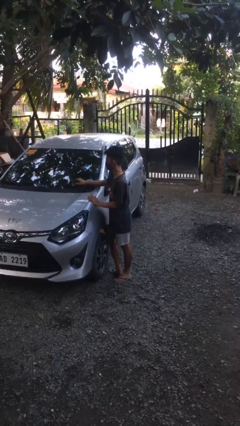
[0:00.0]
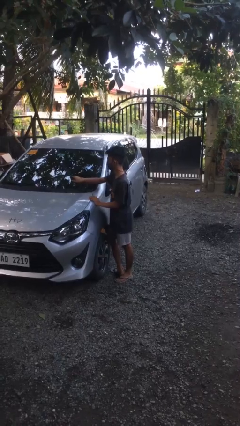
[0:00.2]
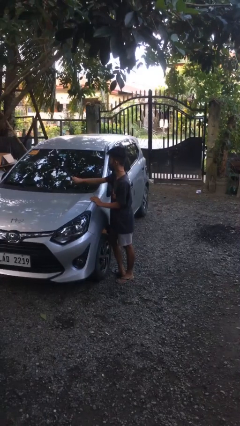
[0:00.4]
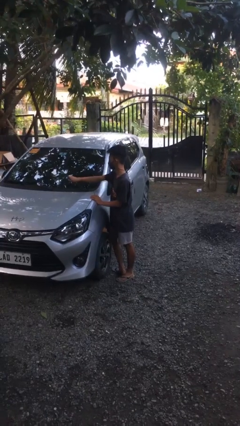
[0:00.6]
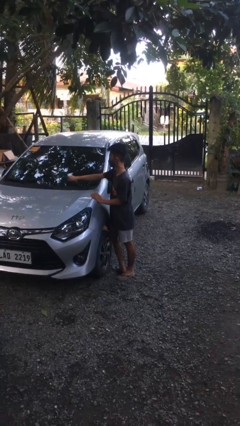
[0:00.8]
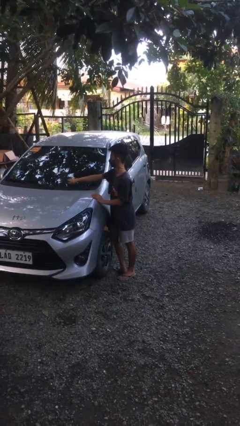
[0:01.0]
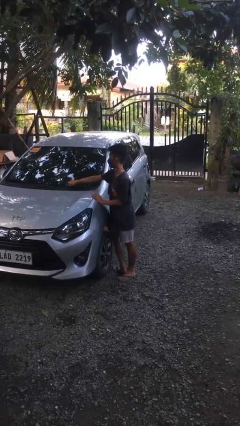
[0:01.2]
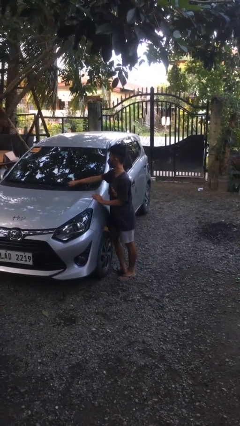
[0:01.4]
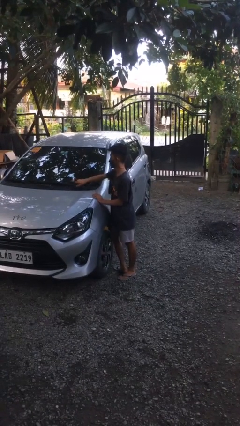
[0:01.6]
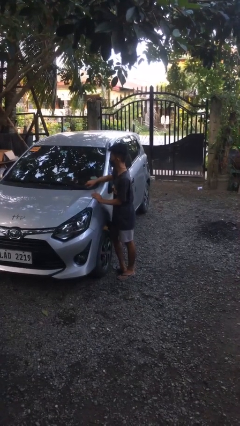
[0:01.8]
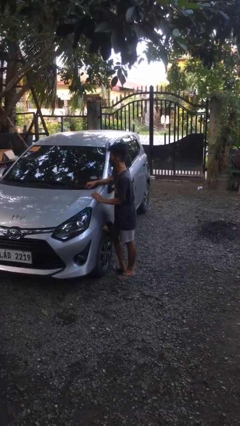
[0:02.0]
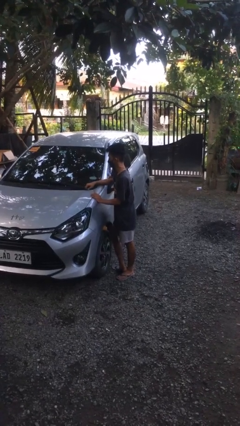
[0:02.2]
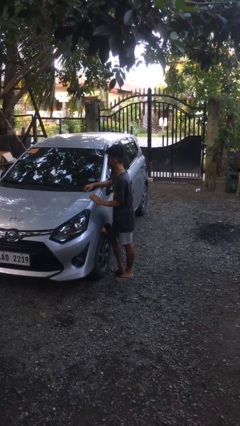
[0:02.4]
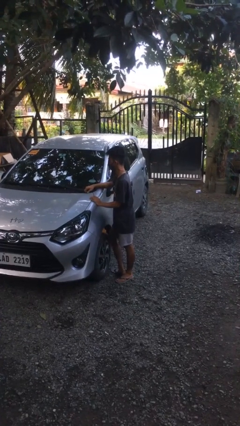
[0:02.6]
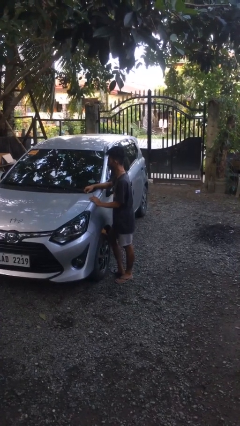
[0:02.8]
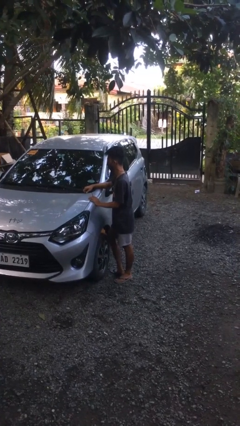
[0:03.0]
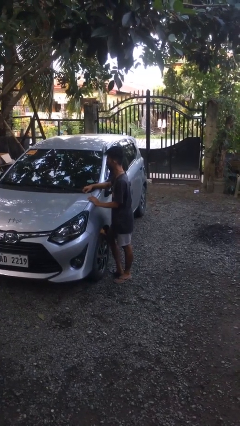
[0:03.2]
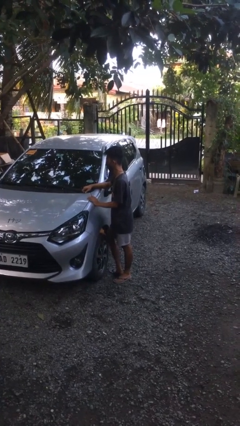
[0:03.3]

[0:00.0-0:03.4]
person flips down car wipers

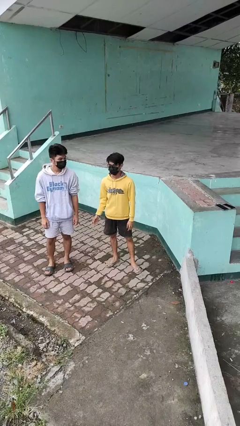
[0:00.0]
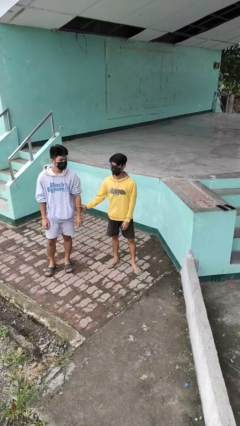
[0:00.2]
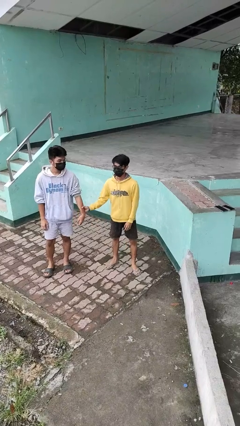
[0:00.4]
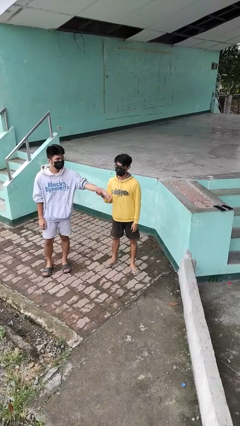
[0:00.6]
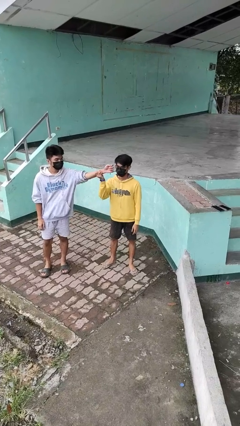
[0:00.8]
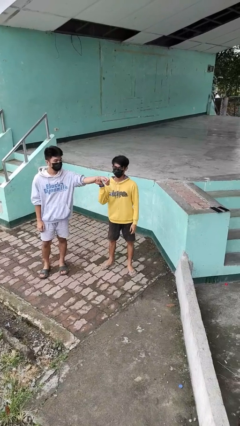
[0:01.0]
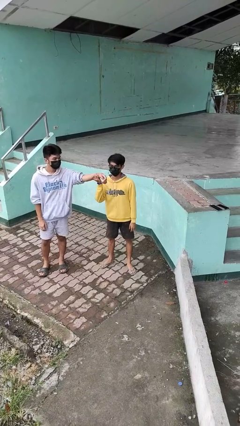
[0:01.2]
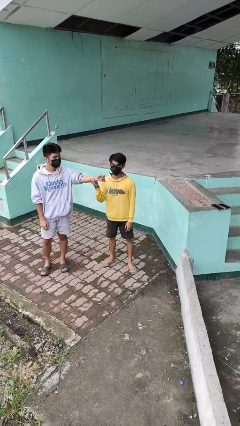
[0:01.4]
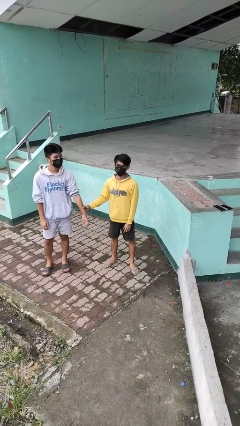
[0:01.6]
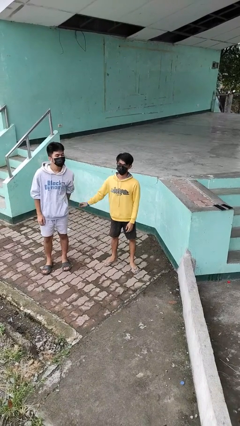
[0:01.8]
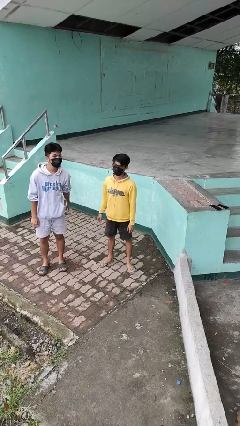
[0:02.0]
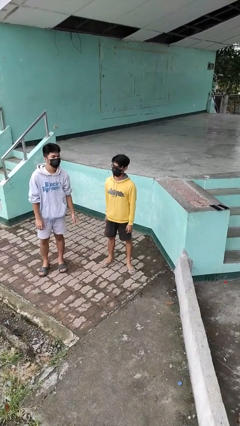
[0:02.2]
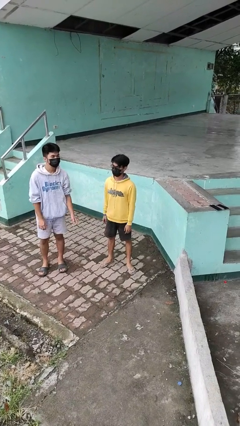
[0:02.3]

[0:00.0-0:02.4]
person grabs person by forearm

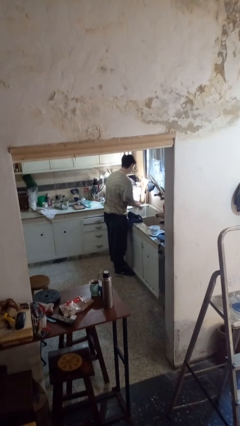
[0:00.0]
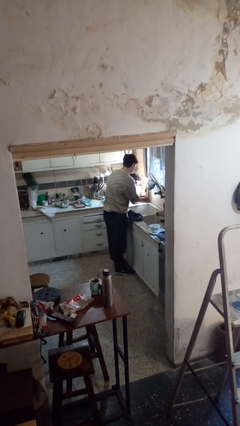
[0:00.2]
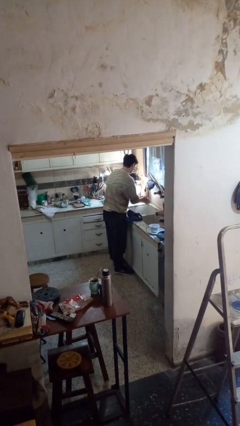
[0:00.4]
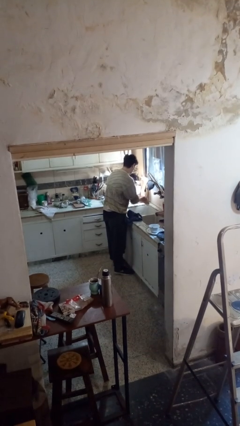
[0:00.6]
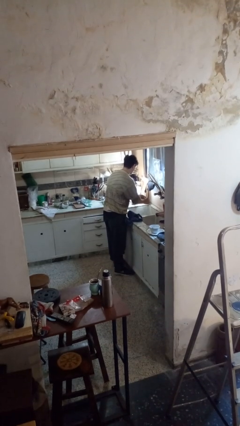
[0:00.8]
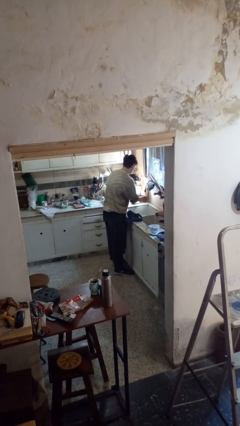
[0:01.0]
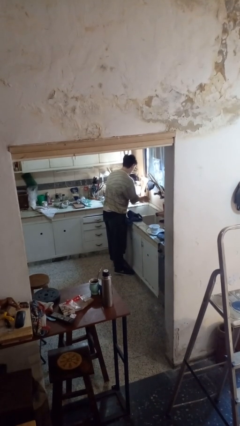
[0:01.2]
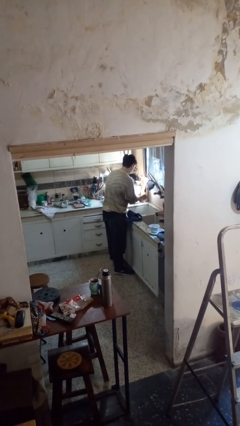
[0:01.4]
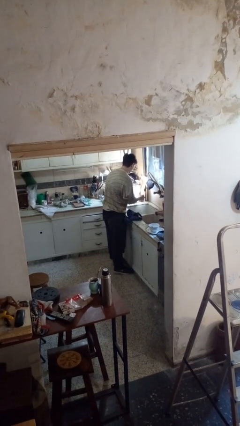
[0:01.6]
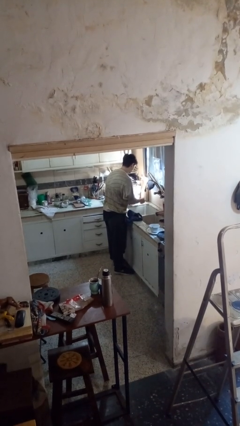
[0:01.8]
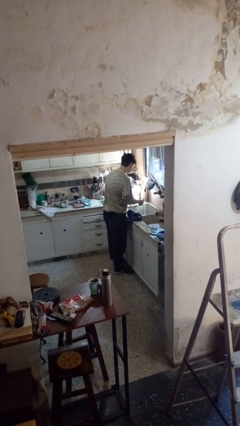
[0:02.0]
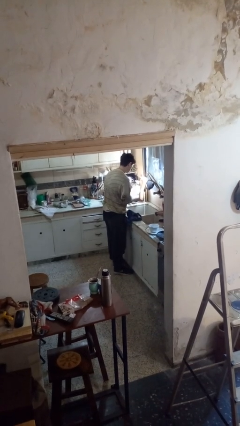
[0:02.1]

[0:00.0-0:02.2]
person washes hands

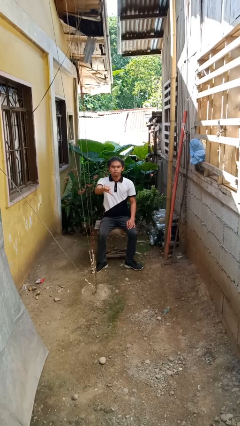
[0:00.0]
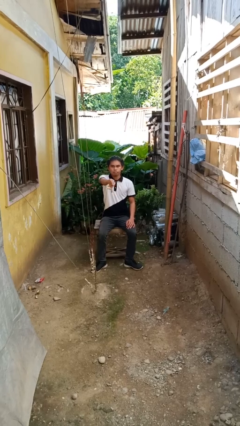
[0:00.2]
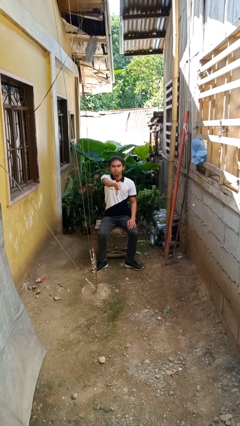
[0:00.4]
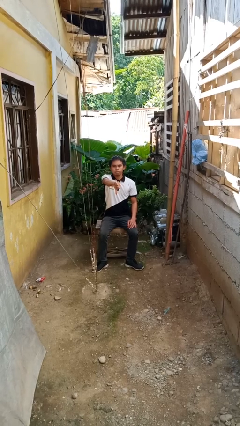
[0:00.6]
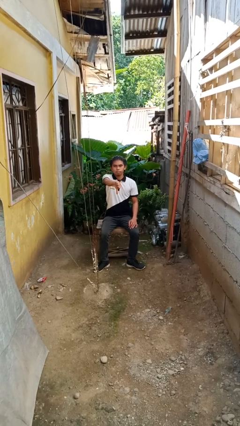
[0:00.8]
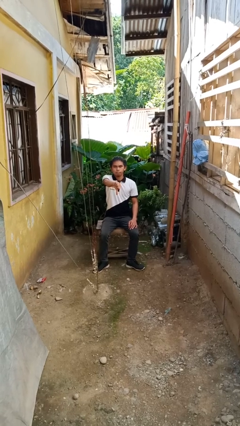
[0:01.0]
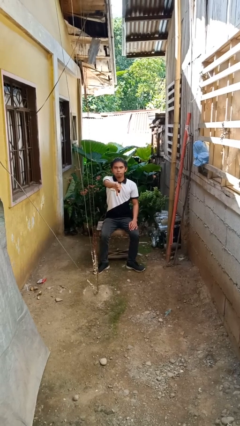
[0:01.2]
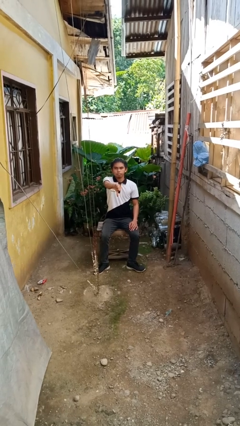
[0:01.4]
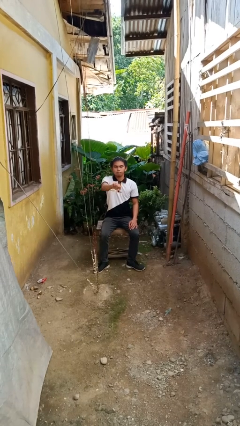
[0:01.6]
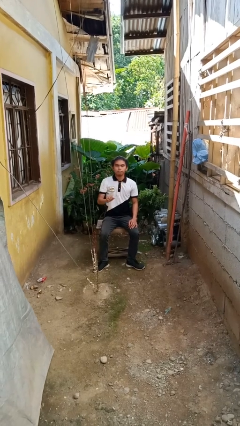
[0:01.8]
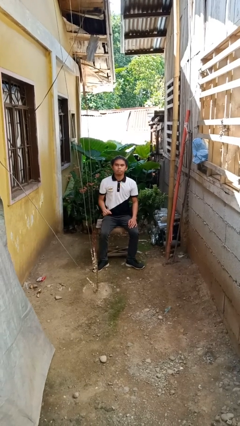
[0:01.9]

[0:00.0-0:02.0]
person gestures thumbs down

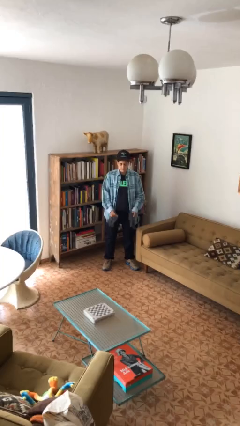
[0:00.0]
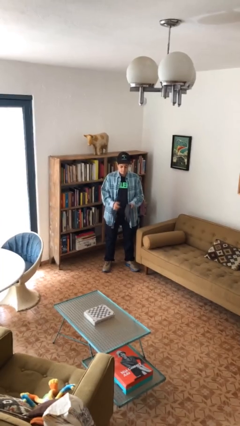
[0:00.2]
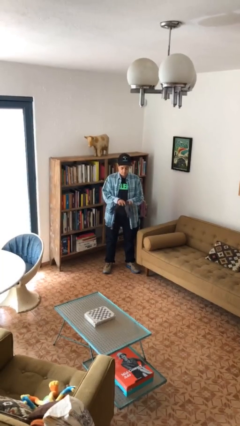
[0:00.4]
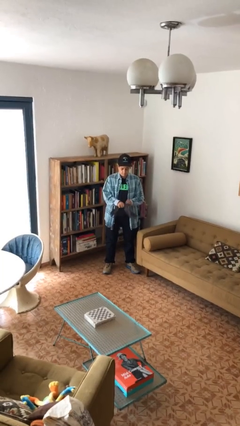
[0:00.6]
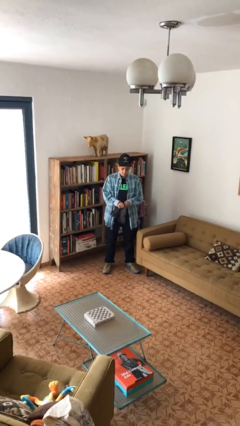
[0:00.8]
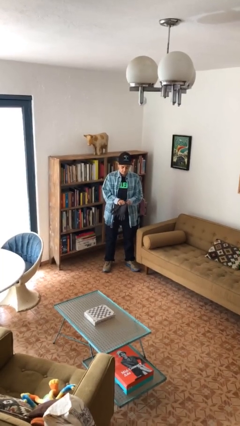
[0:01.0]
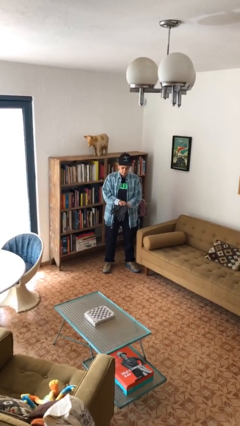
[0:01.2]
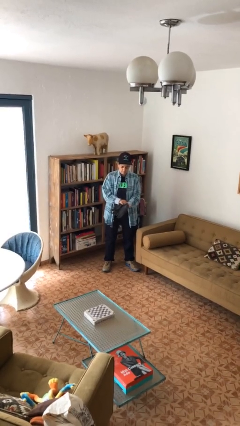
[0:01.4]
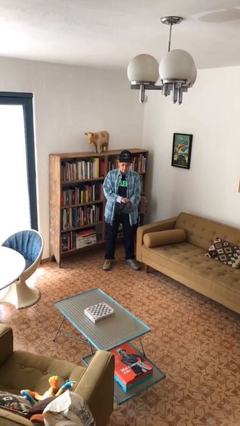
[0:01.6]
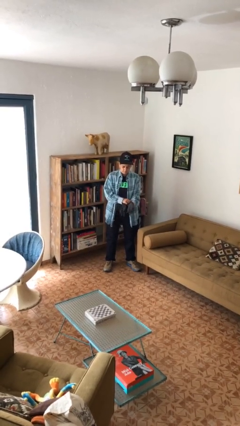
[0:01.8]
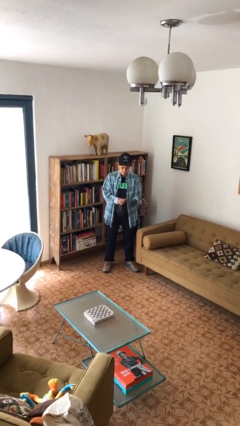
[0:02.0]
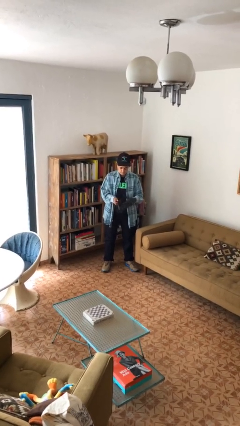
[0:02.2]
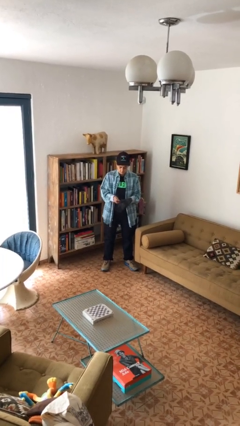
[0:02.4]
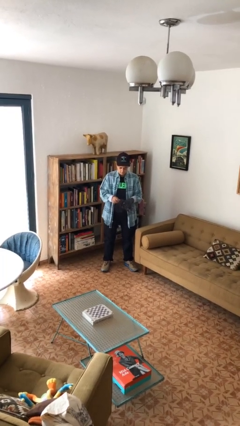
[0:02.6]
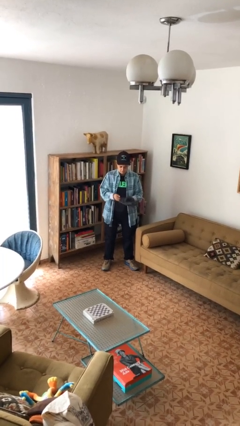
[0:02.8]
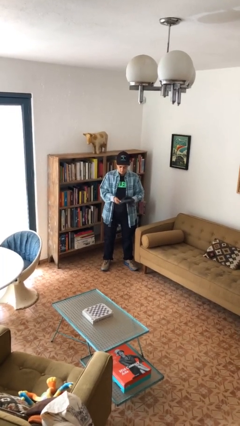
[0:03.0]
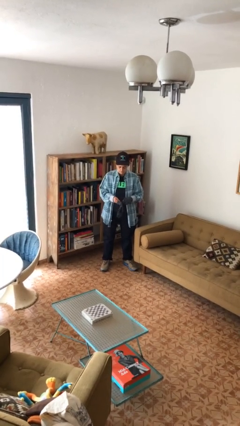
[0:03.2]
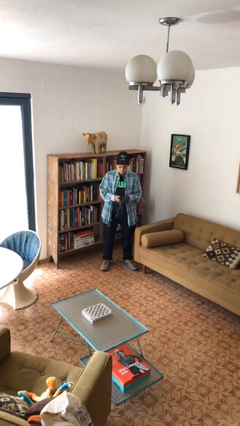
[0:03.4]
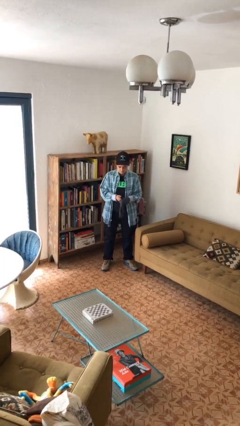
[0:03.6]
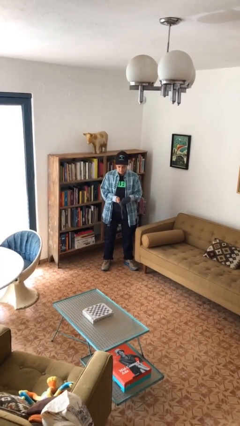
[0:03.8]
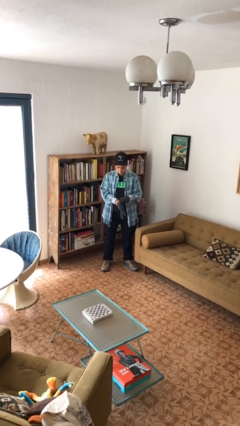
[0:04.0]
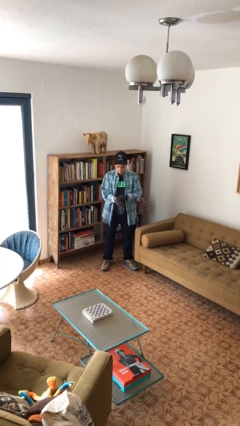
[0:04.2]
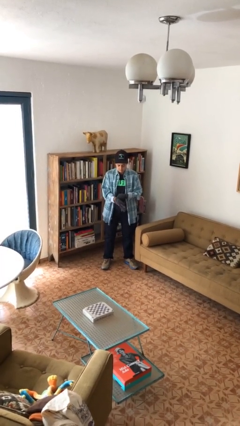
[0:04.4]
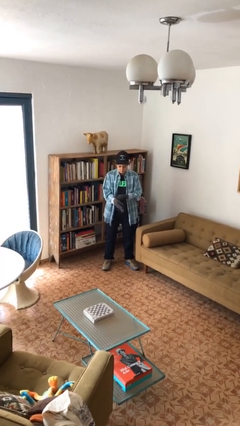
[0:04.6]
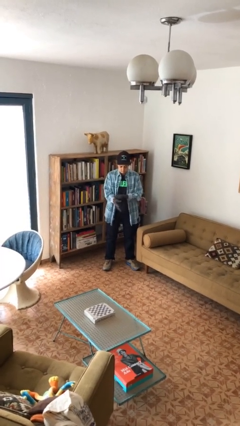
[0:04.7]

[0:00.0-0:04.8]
person puts on gloves

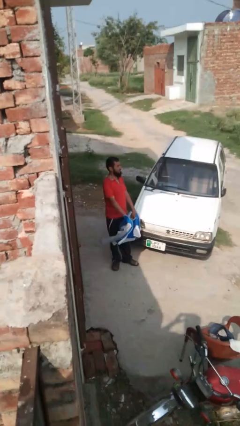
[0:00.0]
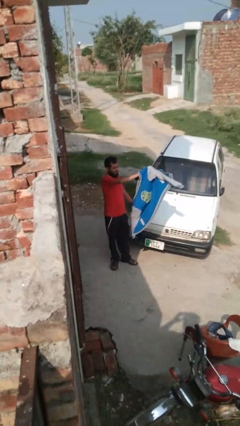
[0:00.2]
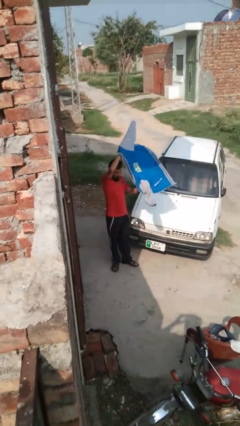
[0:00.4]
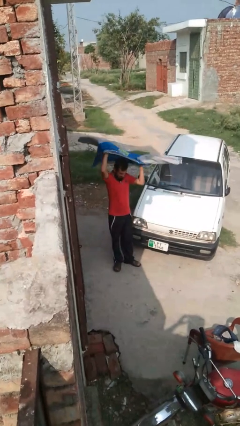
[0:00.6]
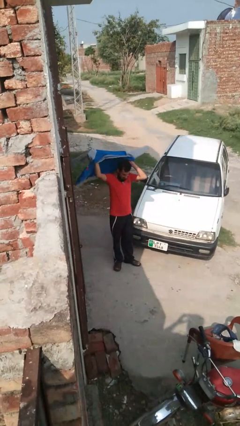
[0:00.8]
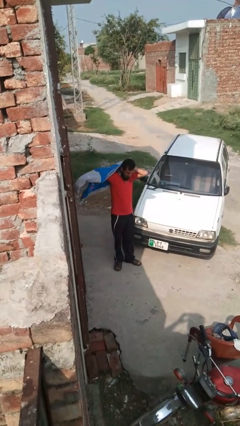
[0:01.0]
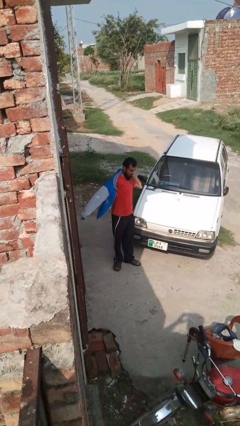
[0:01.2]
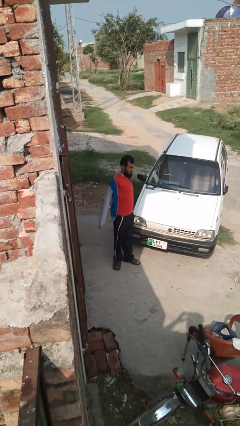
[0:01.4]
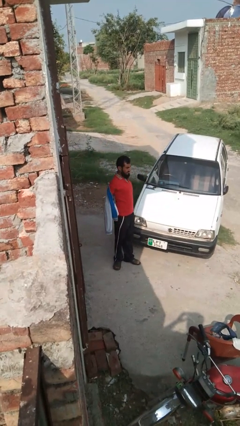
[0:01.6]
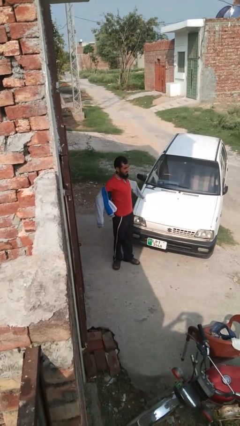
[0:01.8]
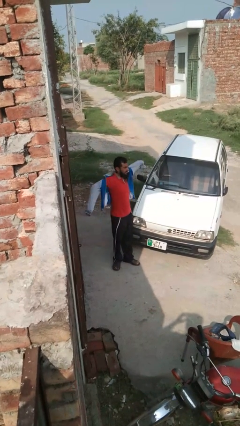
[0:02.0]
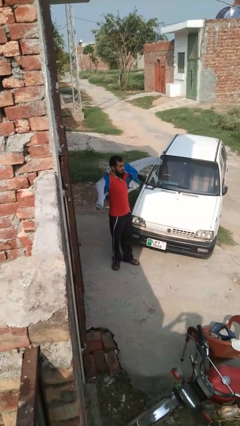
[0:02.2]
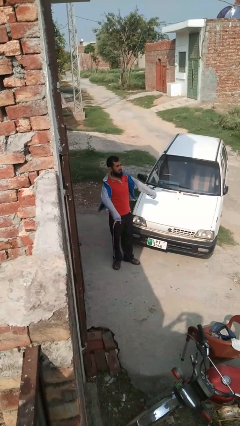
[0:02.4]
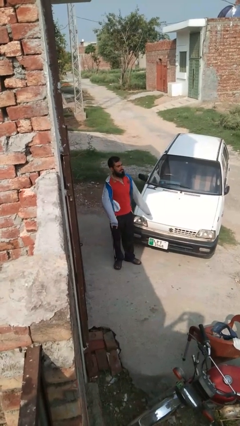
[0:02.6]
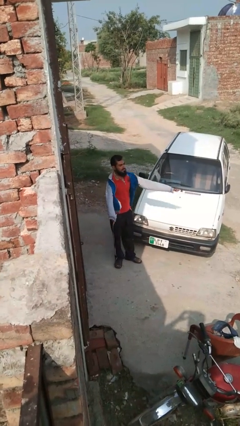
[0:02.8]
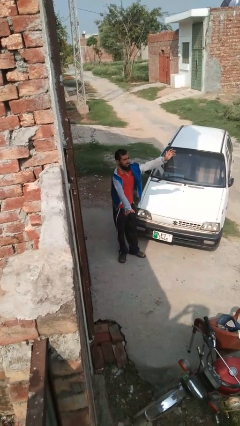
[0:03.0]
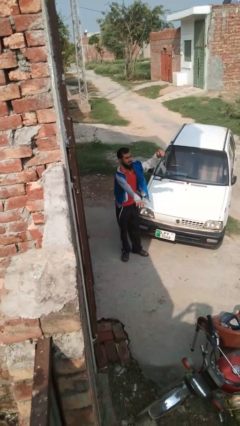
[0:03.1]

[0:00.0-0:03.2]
person puts on jacket
